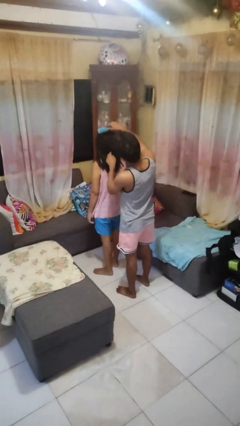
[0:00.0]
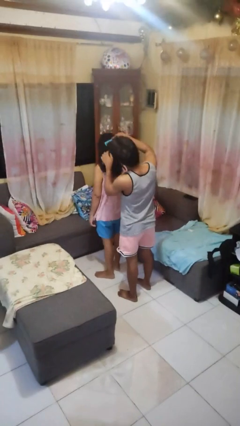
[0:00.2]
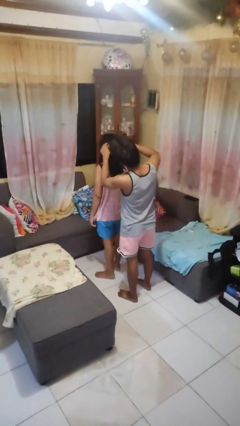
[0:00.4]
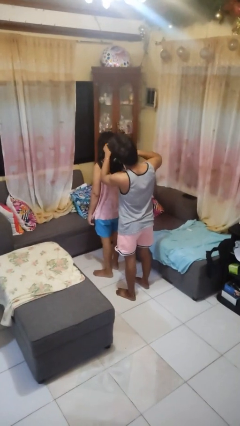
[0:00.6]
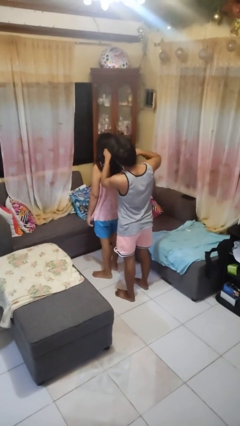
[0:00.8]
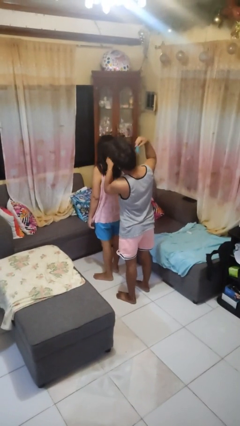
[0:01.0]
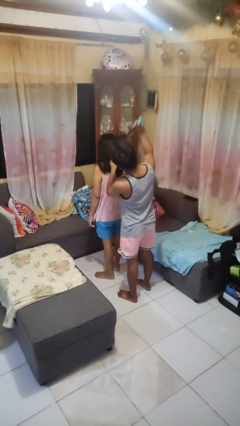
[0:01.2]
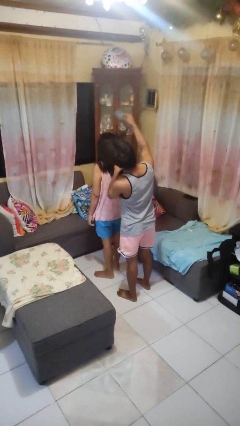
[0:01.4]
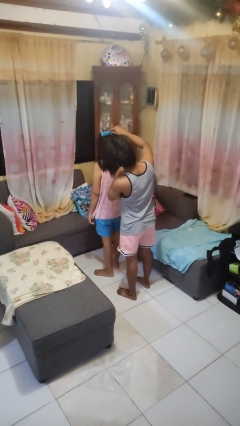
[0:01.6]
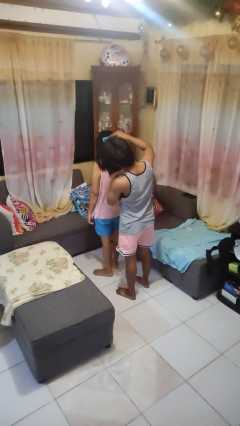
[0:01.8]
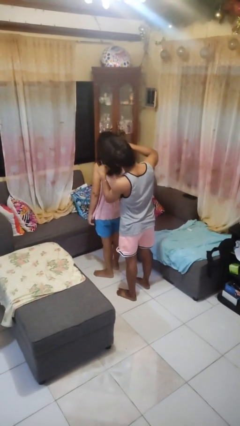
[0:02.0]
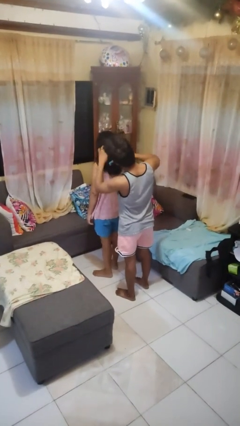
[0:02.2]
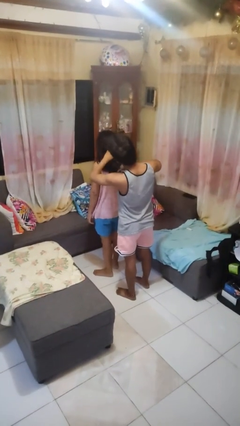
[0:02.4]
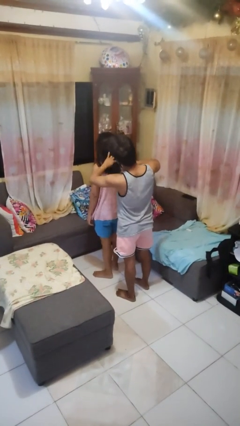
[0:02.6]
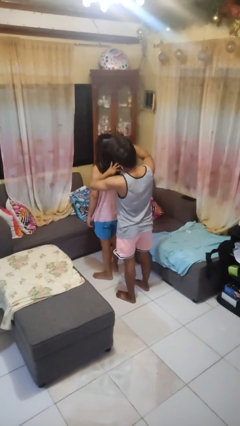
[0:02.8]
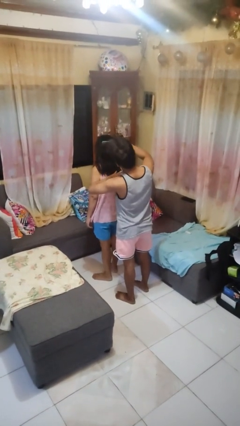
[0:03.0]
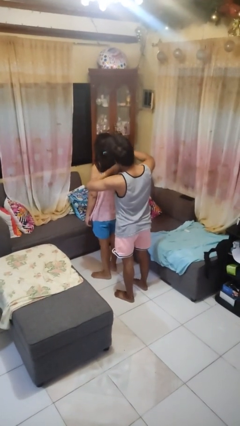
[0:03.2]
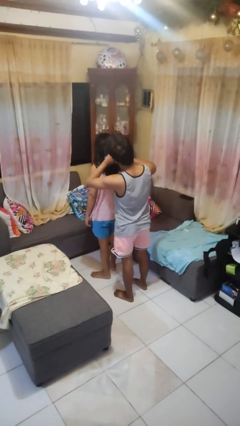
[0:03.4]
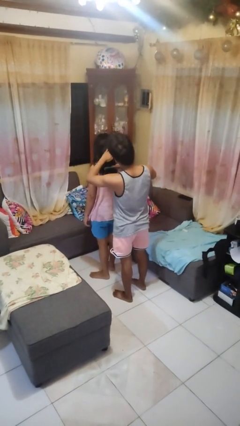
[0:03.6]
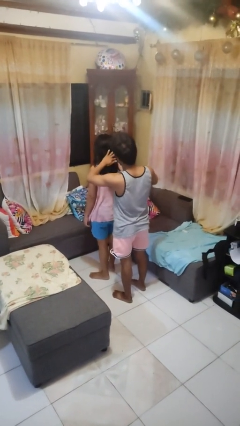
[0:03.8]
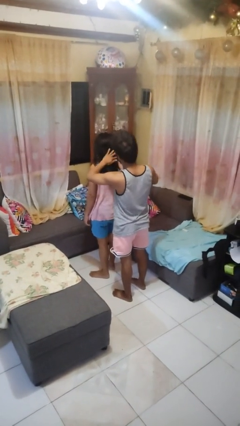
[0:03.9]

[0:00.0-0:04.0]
person brushes hair of person

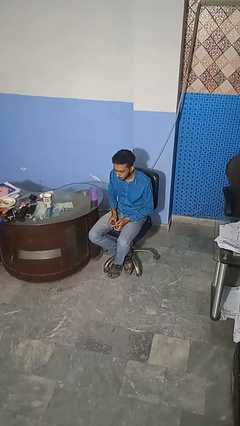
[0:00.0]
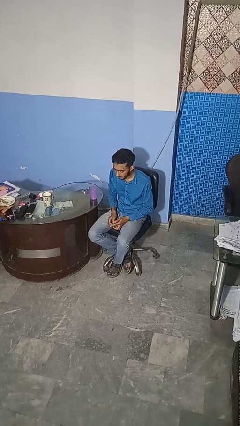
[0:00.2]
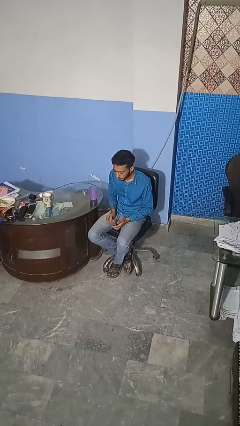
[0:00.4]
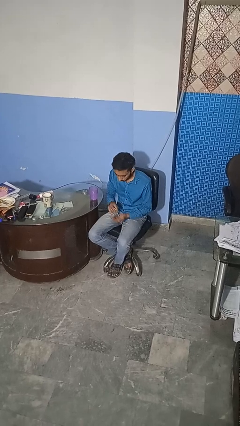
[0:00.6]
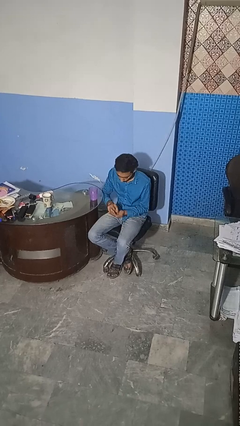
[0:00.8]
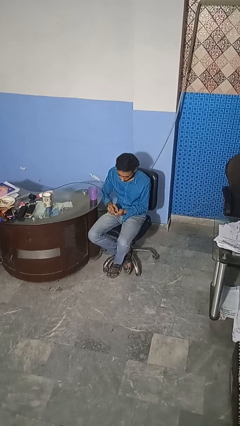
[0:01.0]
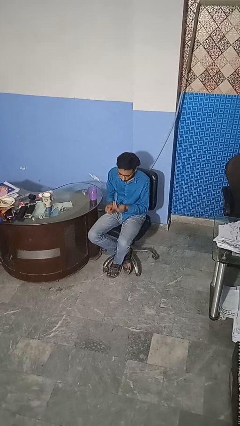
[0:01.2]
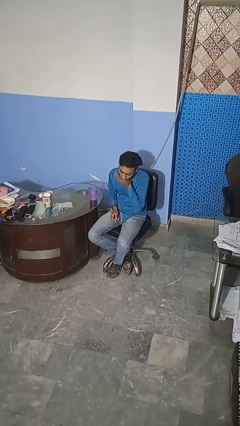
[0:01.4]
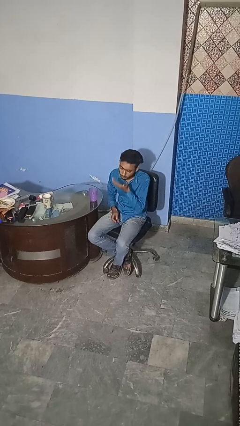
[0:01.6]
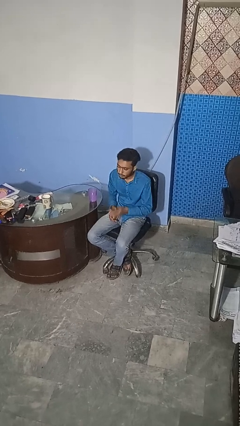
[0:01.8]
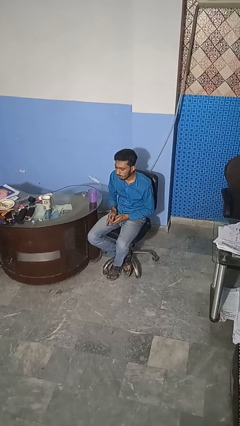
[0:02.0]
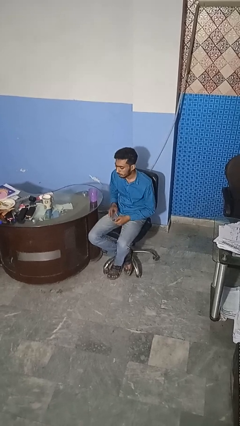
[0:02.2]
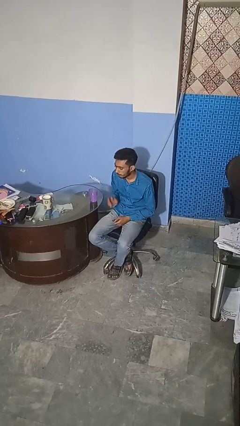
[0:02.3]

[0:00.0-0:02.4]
person takes medicine pills

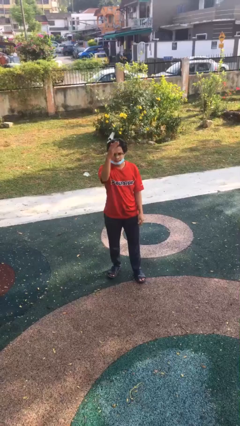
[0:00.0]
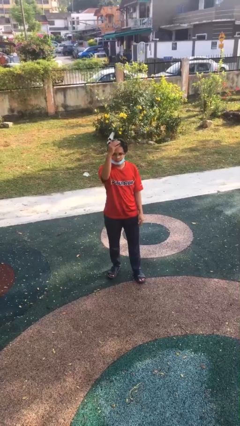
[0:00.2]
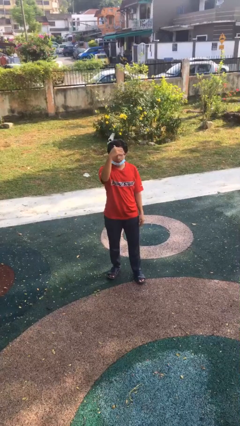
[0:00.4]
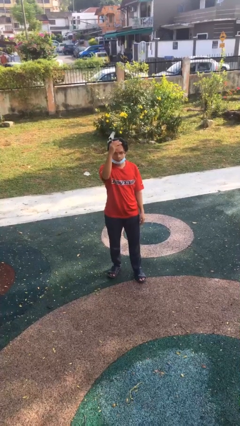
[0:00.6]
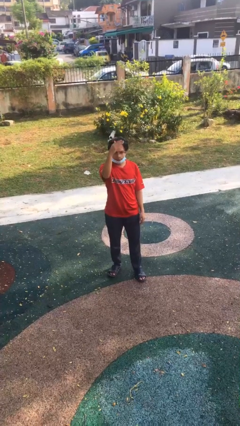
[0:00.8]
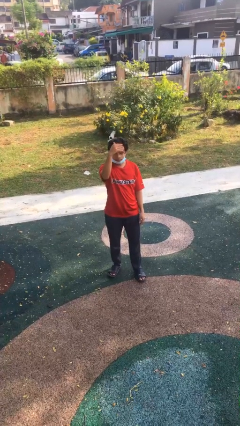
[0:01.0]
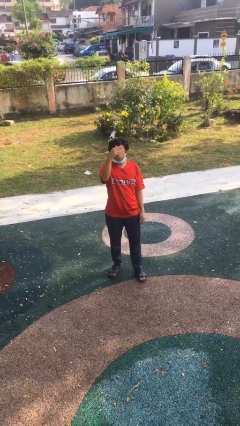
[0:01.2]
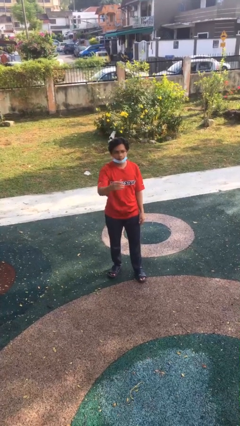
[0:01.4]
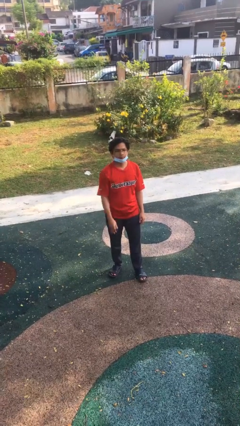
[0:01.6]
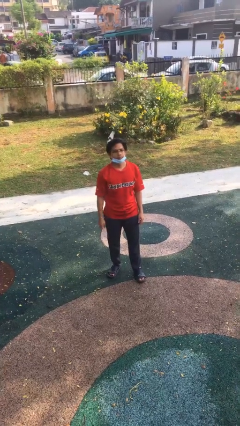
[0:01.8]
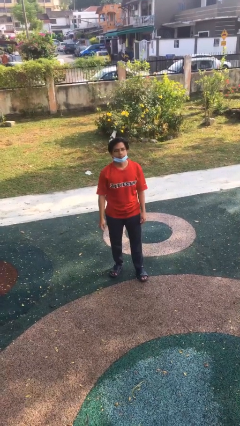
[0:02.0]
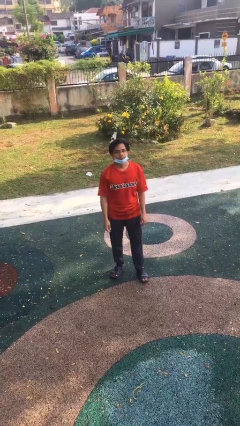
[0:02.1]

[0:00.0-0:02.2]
person gestures come here

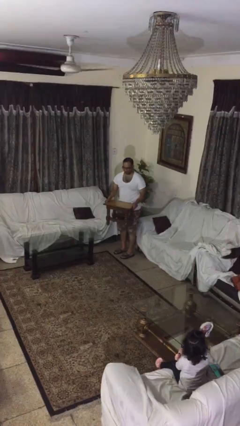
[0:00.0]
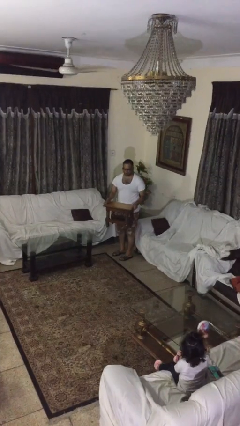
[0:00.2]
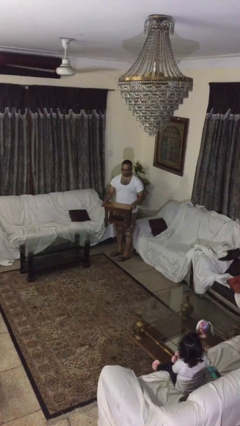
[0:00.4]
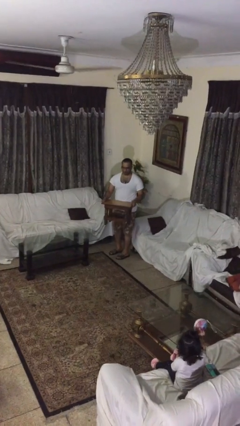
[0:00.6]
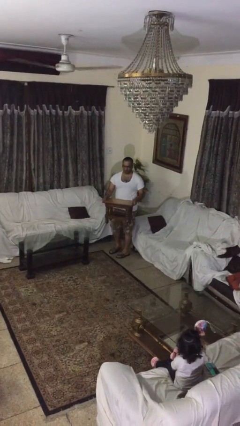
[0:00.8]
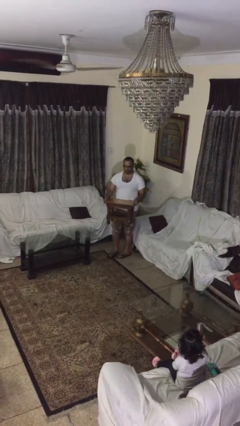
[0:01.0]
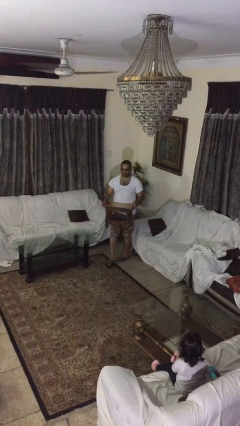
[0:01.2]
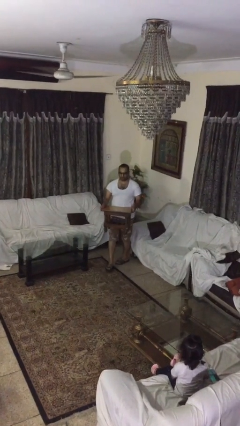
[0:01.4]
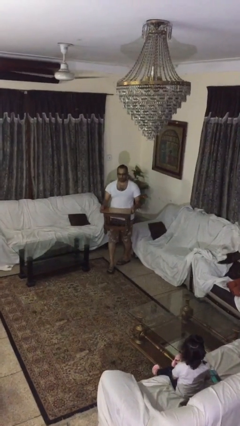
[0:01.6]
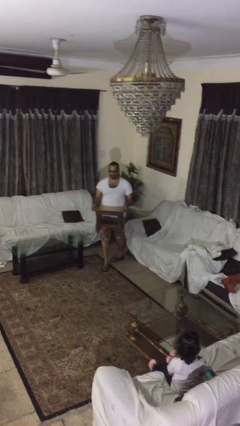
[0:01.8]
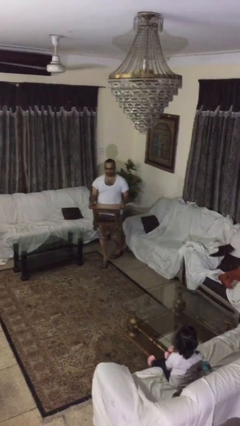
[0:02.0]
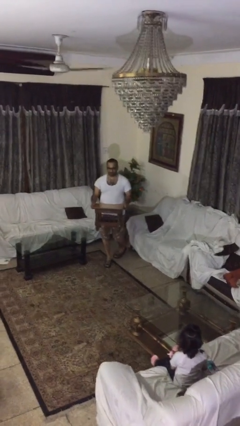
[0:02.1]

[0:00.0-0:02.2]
person carries heavy object

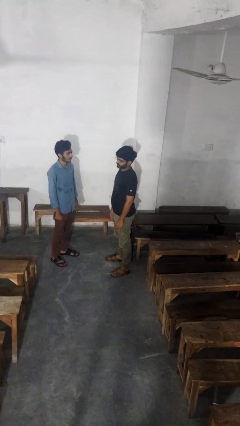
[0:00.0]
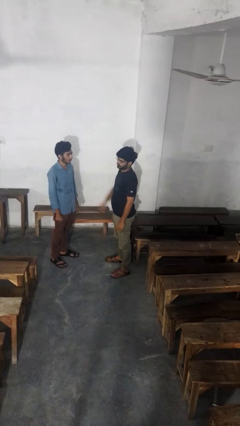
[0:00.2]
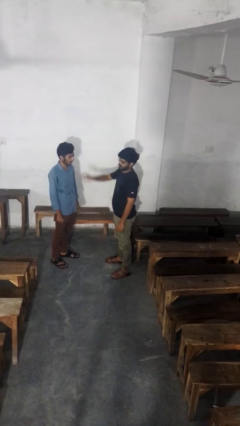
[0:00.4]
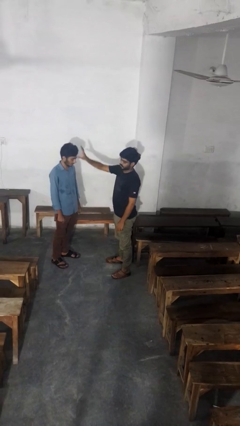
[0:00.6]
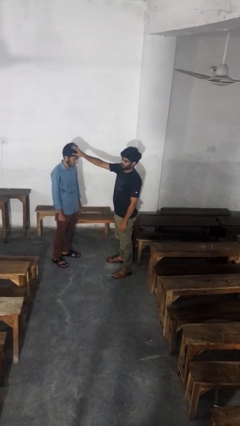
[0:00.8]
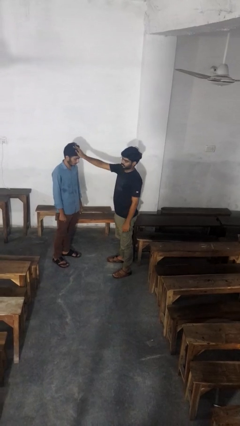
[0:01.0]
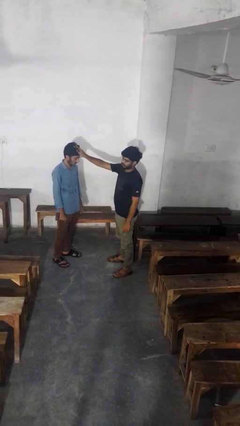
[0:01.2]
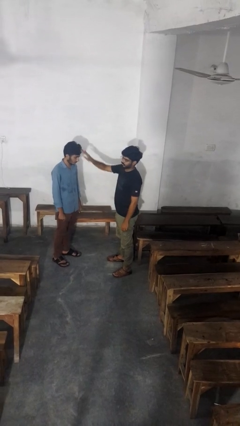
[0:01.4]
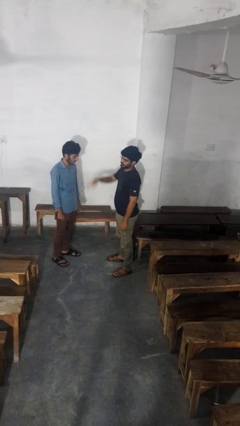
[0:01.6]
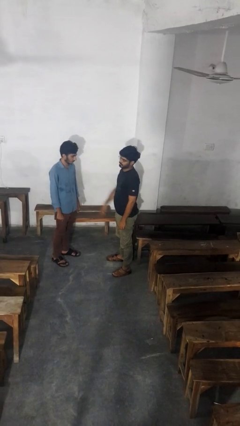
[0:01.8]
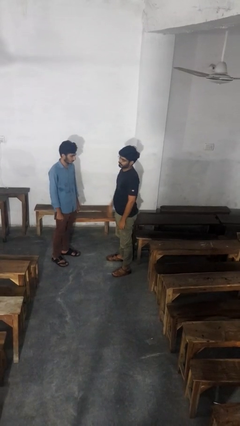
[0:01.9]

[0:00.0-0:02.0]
person grabs person by hair

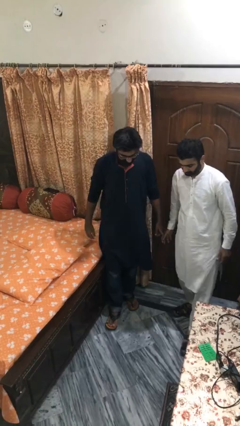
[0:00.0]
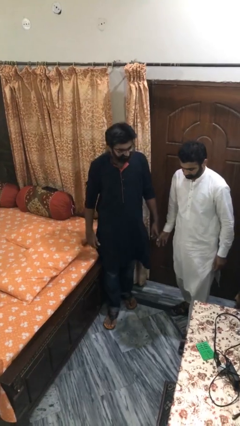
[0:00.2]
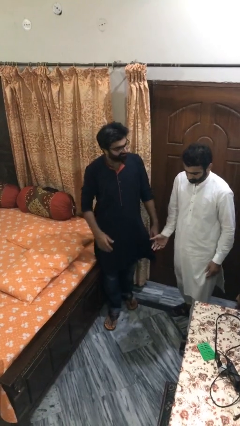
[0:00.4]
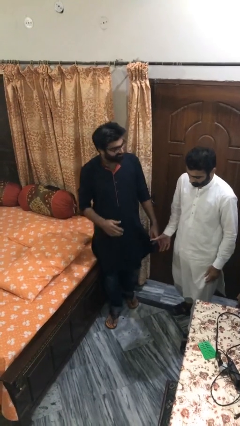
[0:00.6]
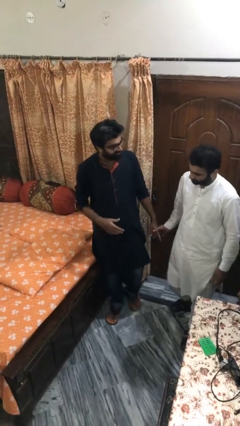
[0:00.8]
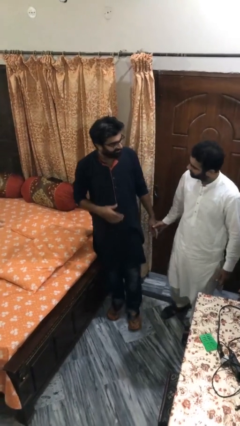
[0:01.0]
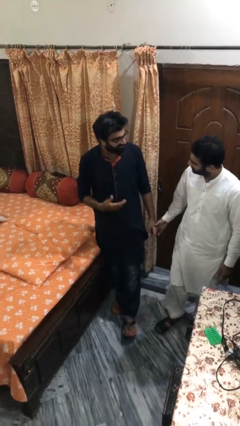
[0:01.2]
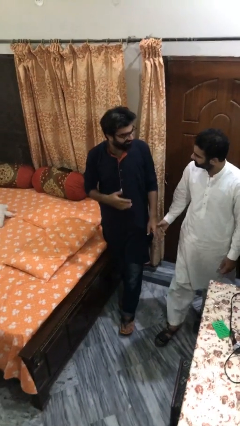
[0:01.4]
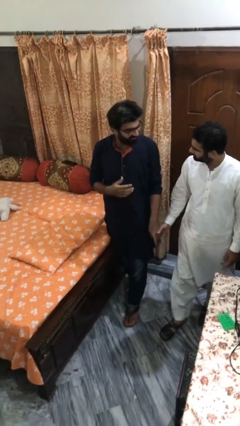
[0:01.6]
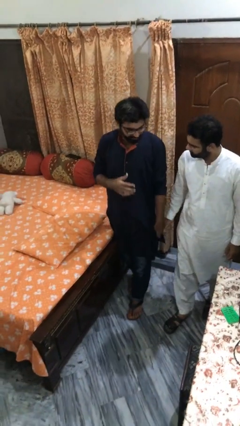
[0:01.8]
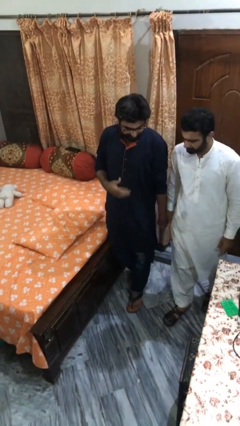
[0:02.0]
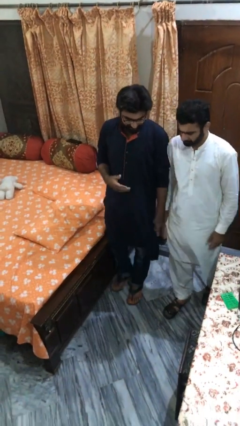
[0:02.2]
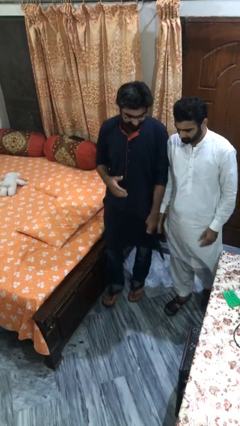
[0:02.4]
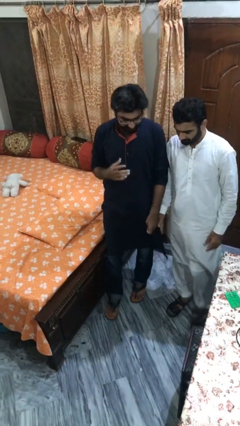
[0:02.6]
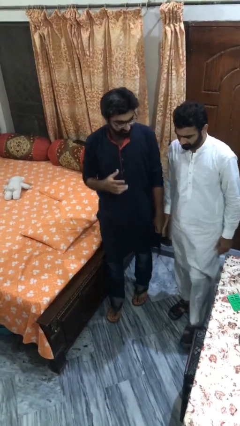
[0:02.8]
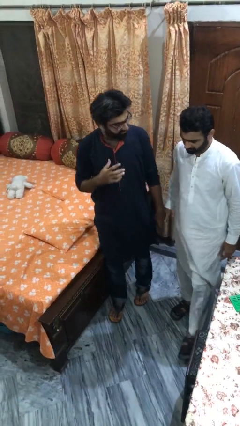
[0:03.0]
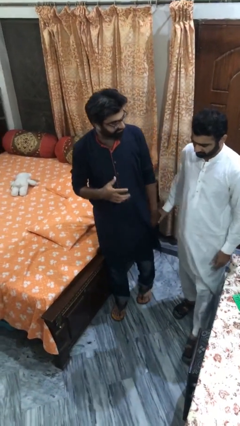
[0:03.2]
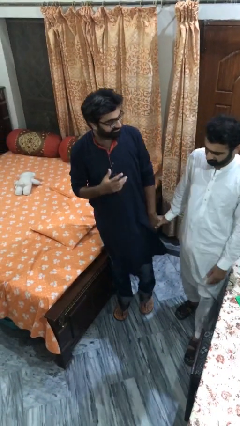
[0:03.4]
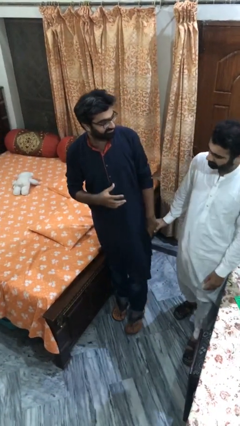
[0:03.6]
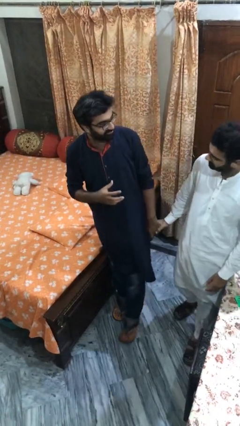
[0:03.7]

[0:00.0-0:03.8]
person holds hand

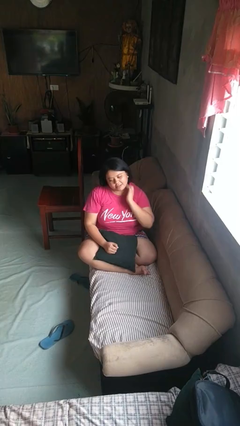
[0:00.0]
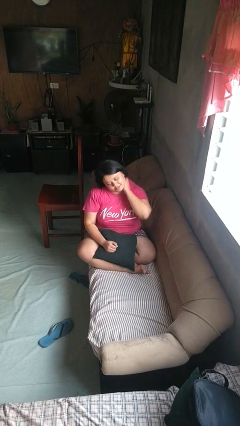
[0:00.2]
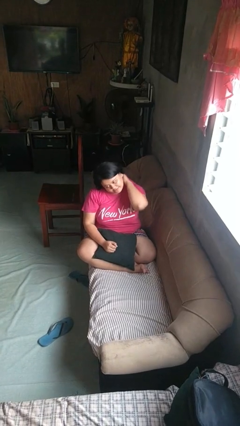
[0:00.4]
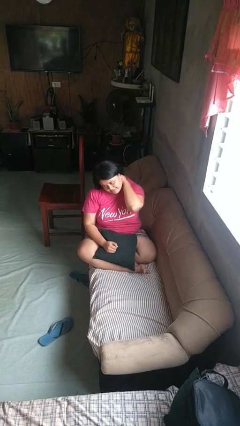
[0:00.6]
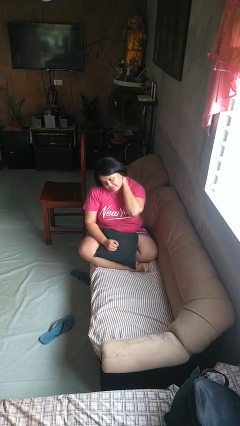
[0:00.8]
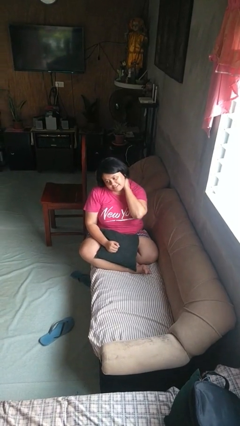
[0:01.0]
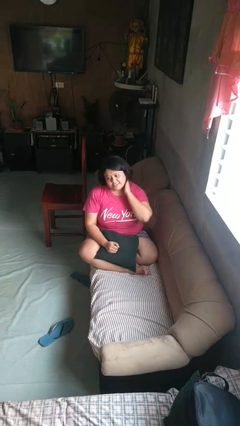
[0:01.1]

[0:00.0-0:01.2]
person rubs neck
